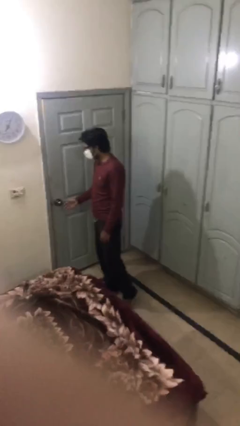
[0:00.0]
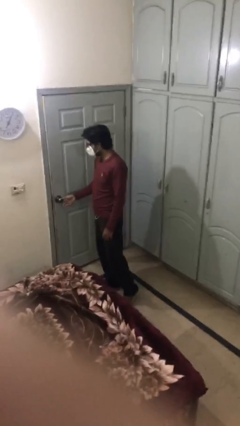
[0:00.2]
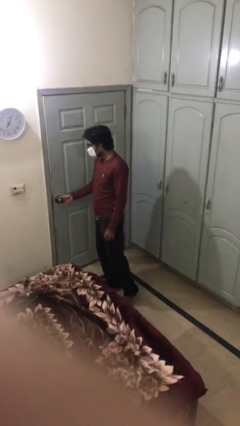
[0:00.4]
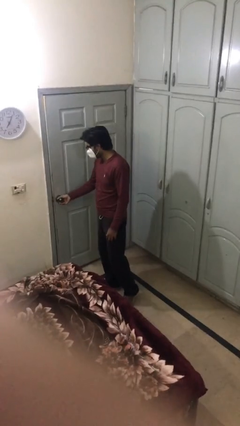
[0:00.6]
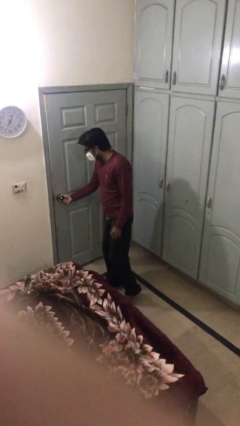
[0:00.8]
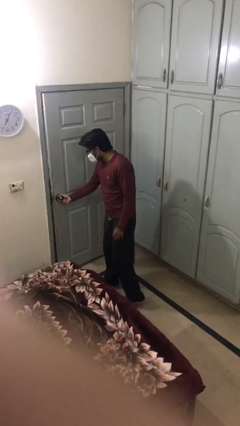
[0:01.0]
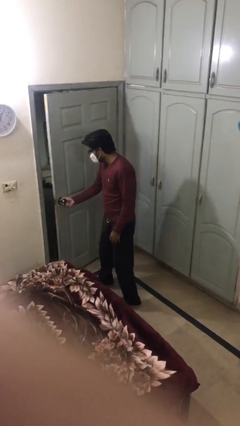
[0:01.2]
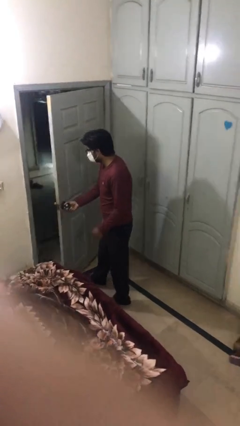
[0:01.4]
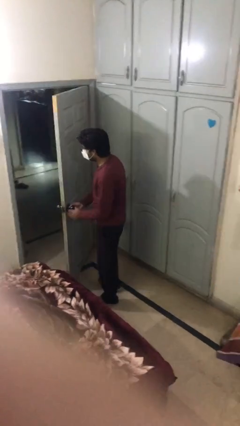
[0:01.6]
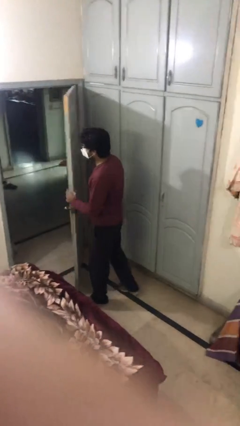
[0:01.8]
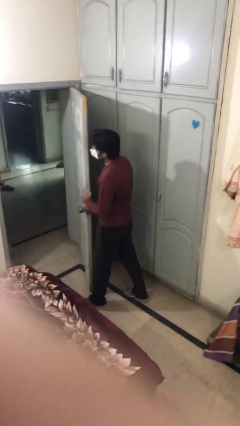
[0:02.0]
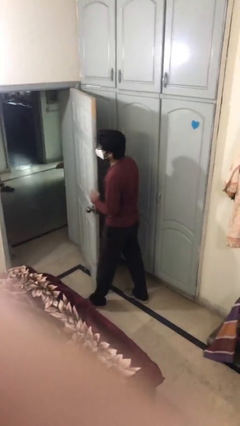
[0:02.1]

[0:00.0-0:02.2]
person opens facility door

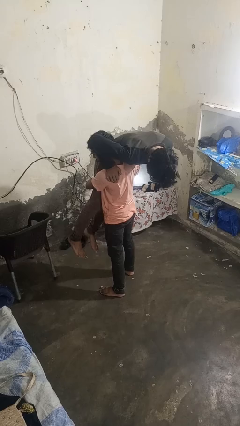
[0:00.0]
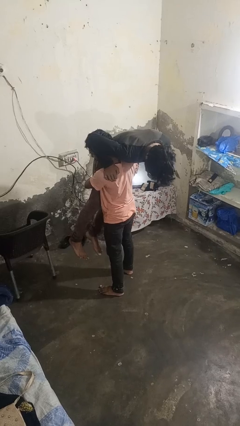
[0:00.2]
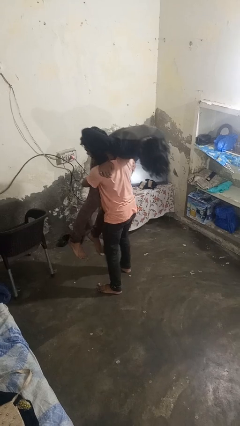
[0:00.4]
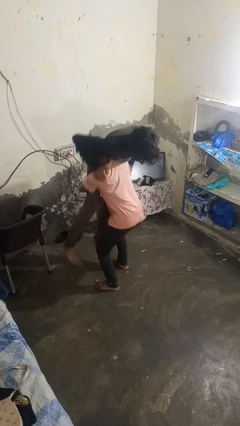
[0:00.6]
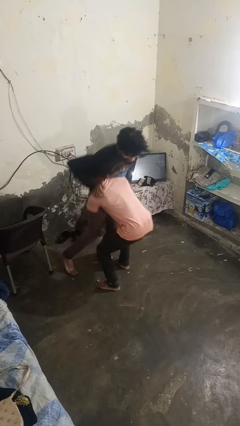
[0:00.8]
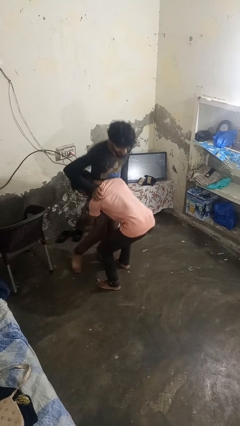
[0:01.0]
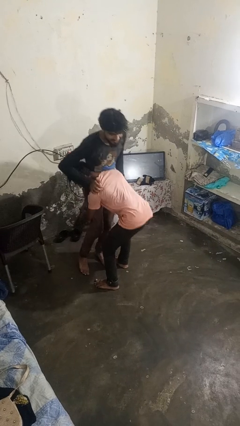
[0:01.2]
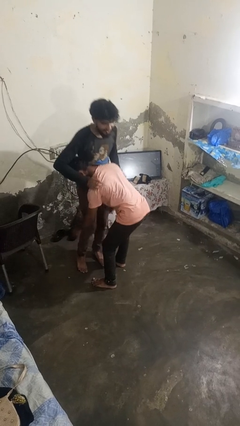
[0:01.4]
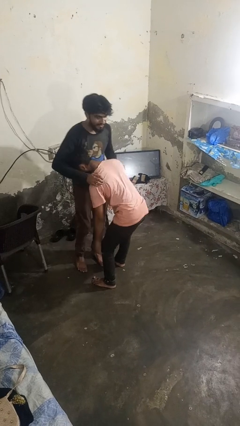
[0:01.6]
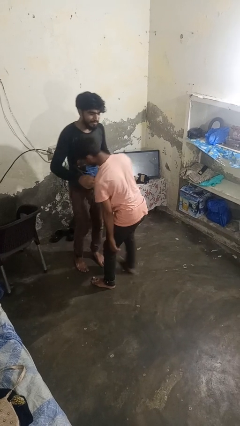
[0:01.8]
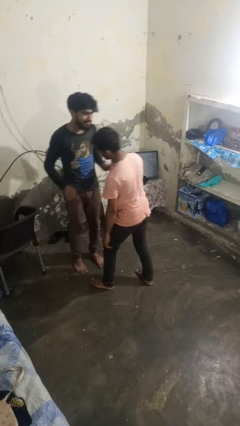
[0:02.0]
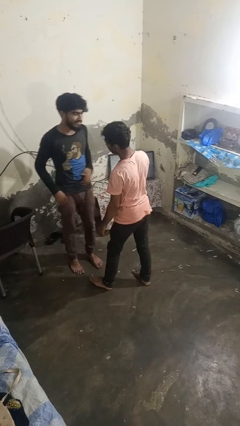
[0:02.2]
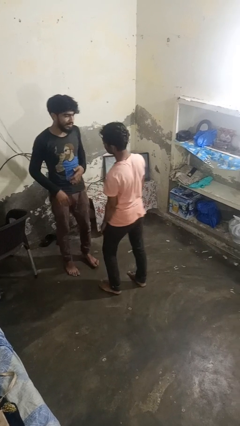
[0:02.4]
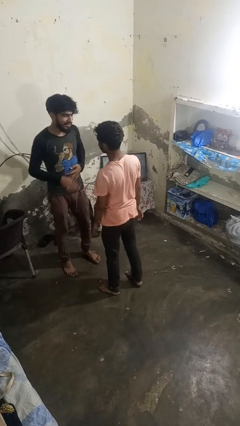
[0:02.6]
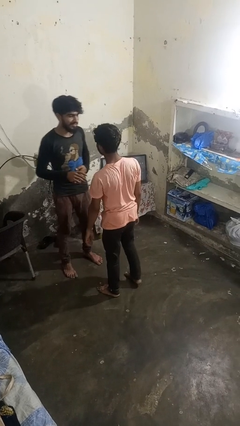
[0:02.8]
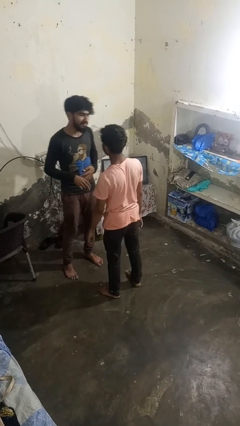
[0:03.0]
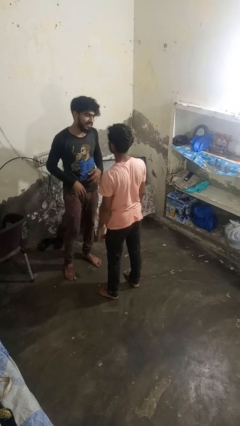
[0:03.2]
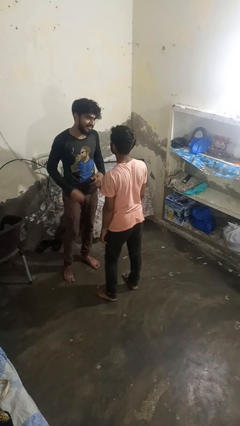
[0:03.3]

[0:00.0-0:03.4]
person puts down person

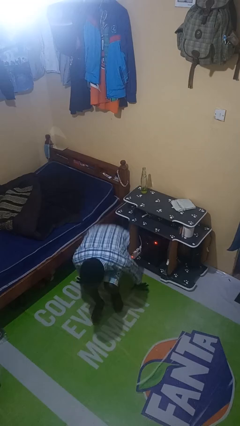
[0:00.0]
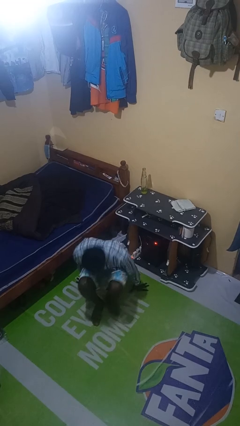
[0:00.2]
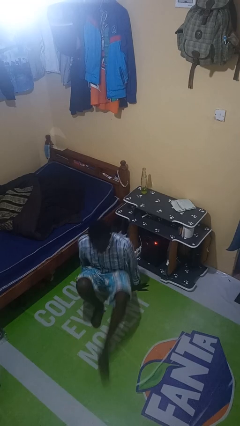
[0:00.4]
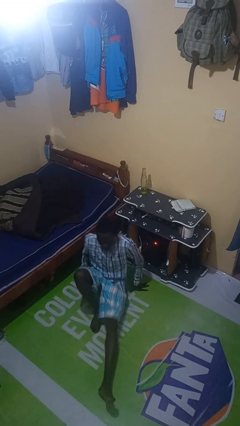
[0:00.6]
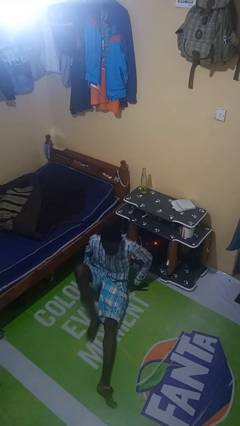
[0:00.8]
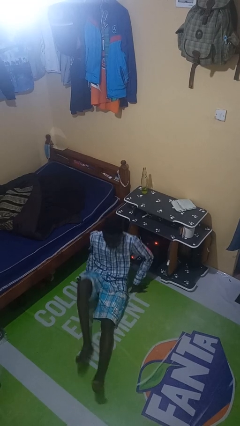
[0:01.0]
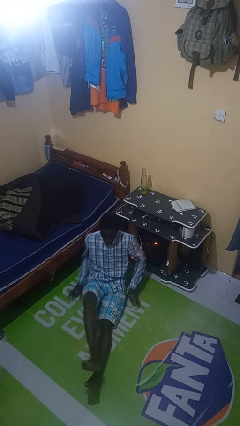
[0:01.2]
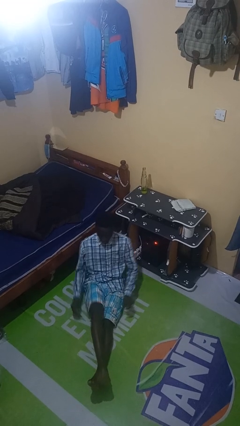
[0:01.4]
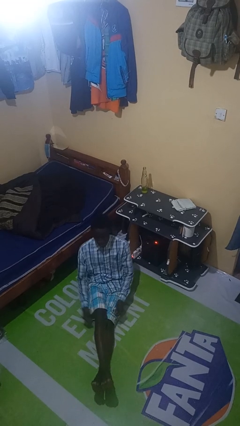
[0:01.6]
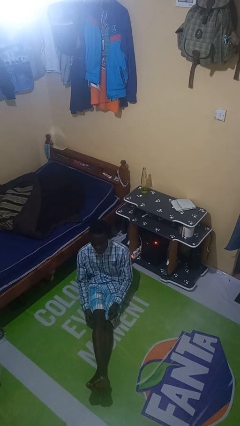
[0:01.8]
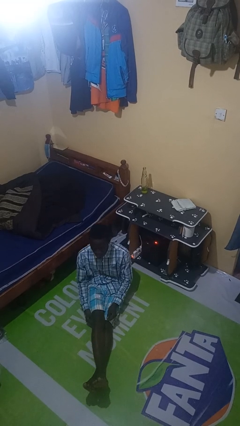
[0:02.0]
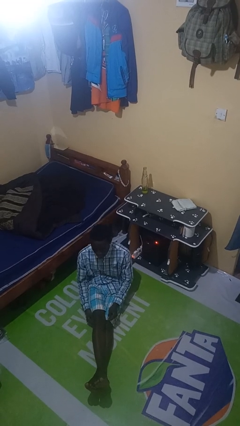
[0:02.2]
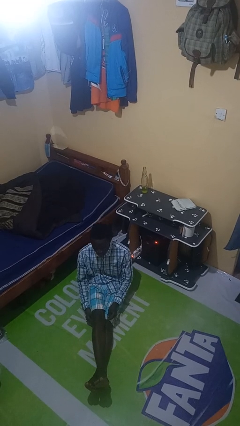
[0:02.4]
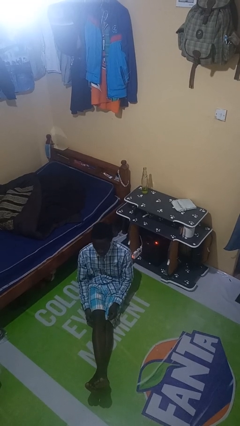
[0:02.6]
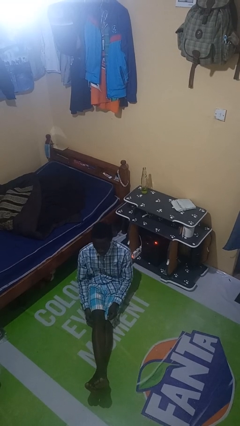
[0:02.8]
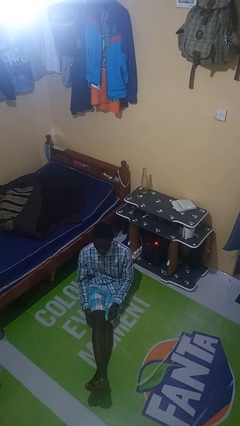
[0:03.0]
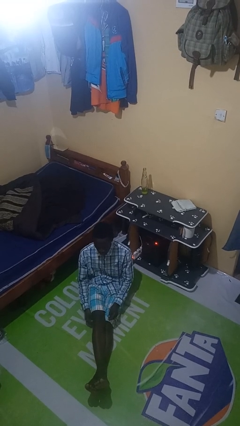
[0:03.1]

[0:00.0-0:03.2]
person sits crisscross

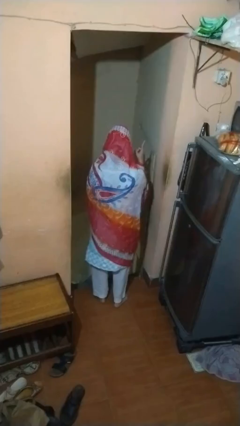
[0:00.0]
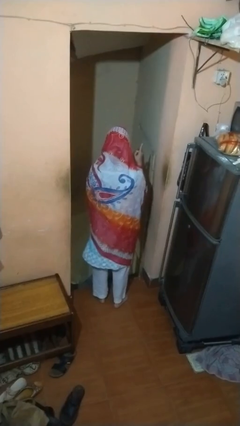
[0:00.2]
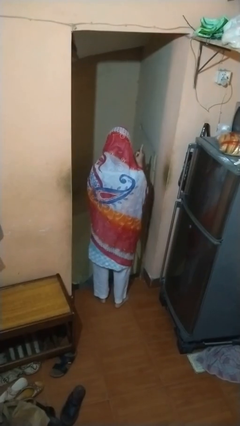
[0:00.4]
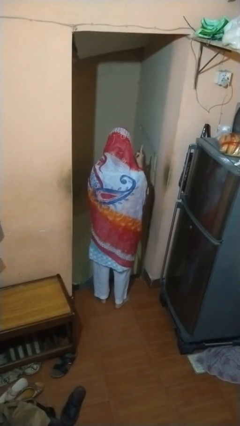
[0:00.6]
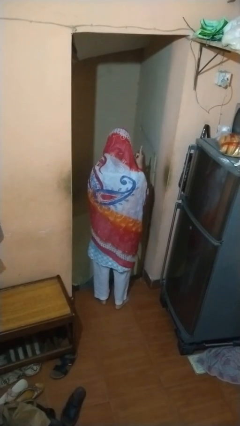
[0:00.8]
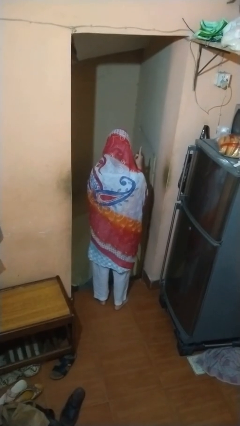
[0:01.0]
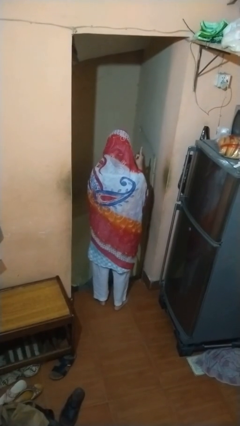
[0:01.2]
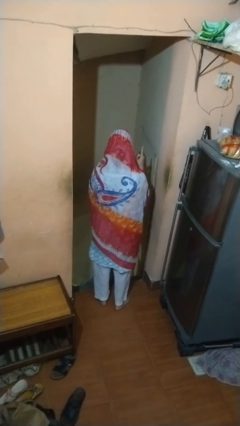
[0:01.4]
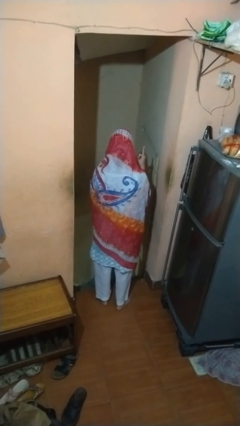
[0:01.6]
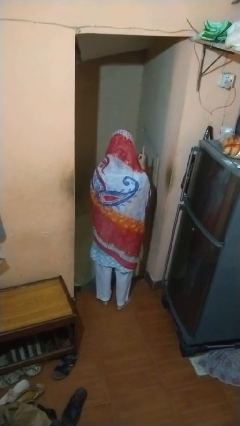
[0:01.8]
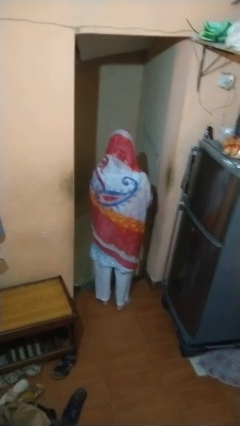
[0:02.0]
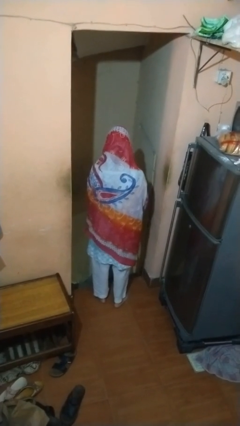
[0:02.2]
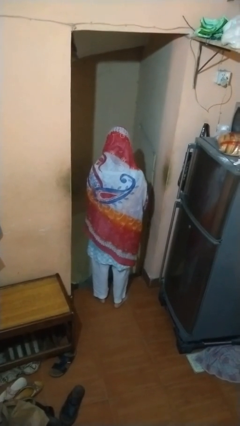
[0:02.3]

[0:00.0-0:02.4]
person gestures number one

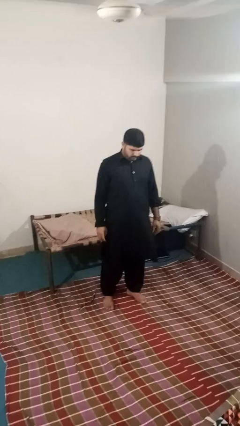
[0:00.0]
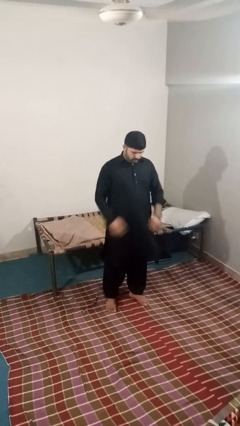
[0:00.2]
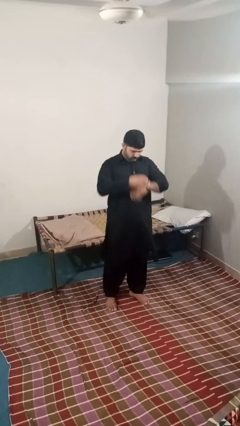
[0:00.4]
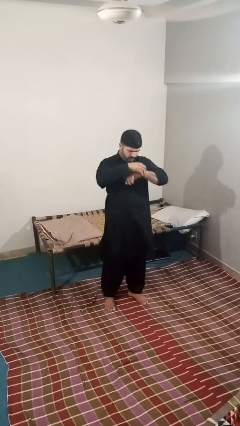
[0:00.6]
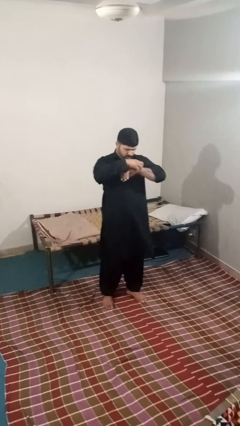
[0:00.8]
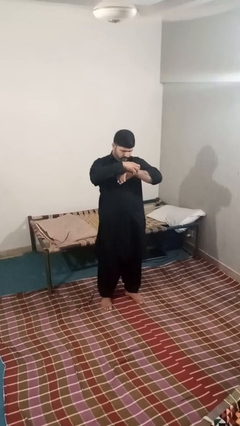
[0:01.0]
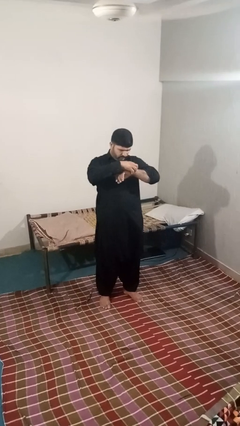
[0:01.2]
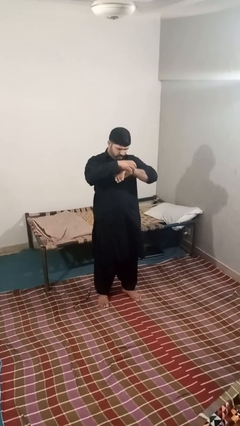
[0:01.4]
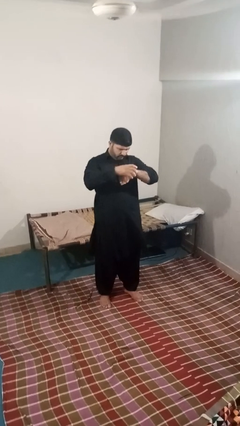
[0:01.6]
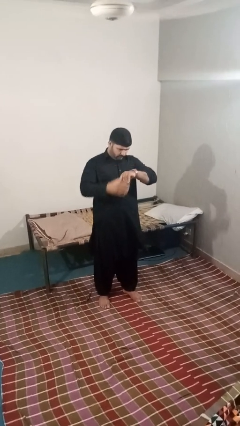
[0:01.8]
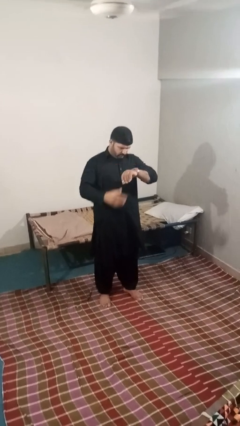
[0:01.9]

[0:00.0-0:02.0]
person looks at wristwatch

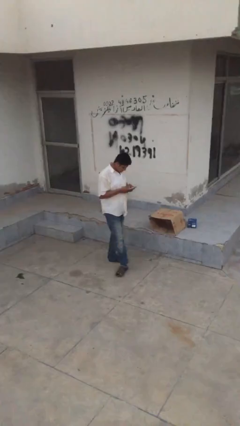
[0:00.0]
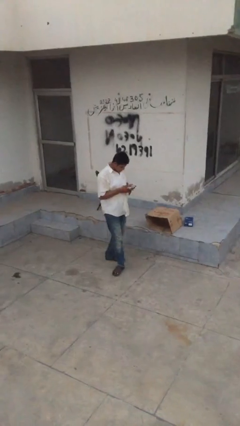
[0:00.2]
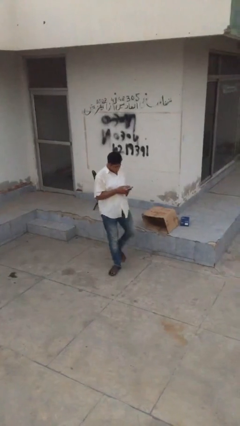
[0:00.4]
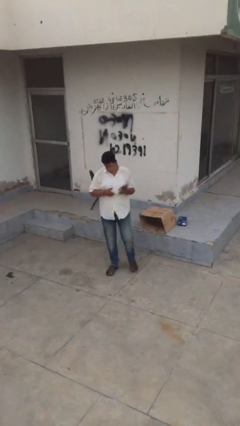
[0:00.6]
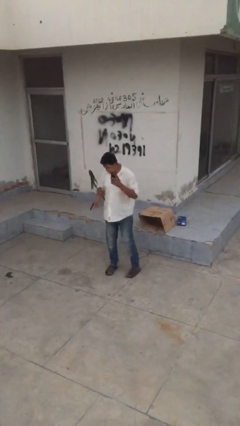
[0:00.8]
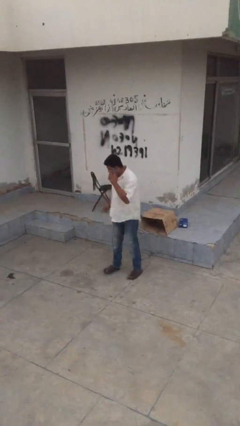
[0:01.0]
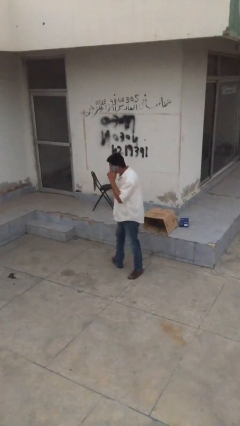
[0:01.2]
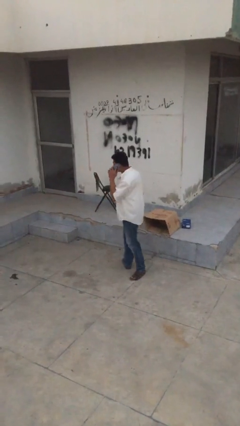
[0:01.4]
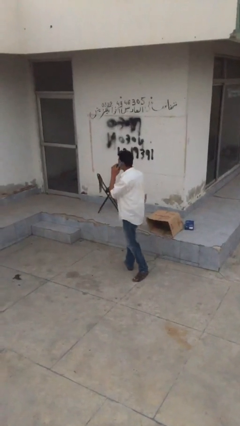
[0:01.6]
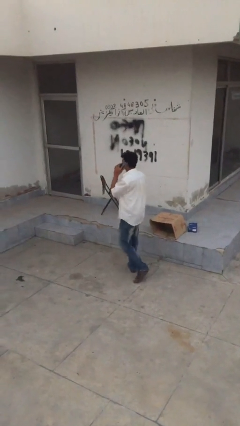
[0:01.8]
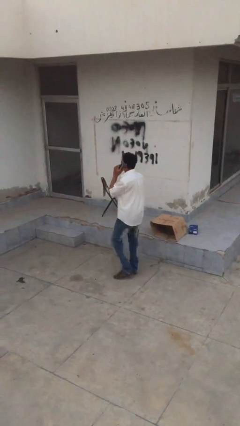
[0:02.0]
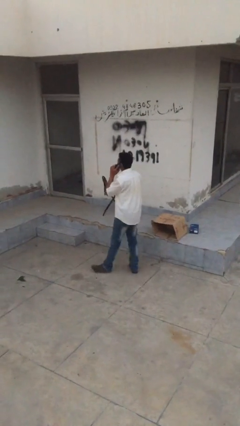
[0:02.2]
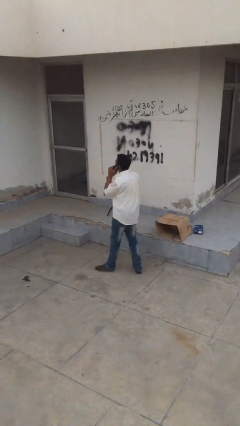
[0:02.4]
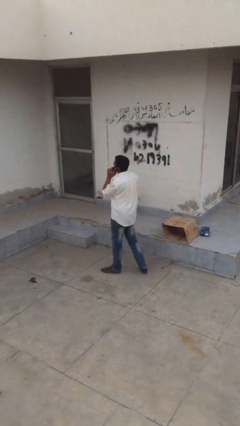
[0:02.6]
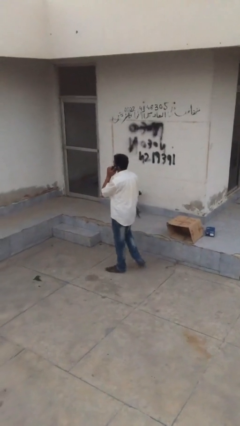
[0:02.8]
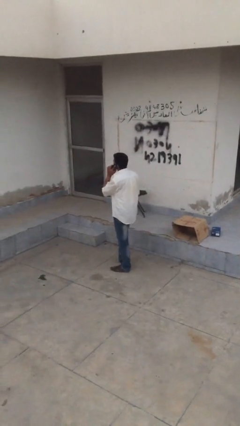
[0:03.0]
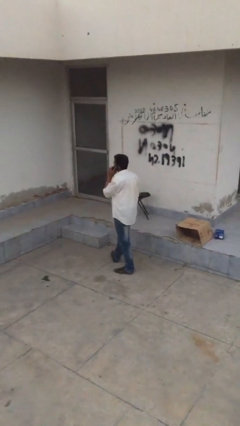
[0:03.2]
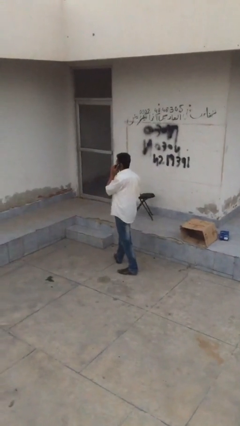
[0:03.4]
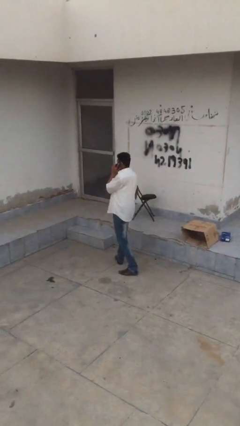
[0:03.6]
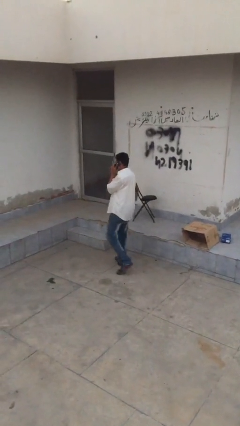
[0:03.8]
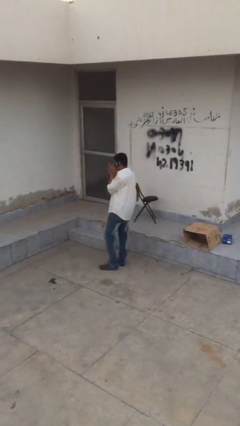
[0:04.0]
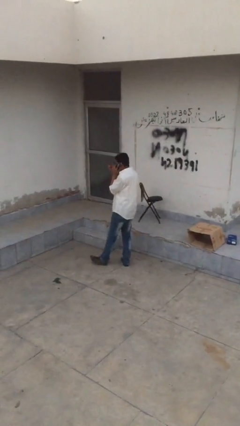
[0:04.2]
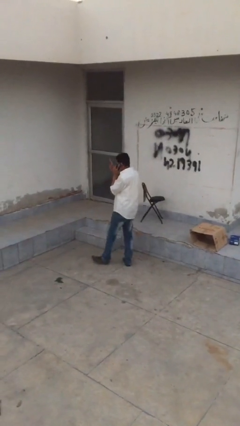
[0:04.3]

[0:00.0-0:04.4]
person talks on phone
